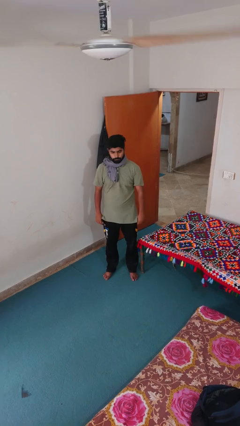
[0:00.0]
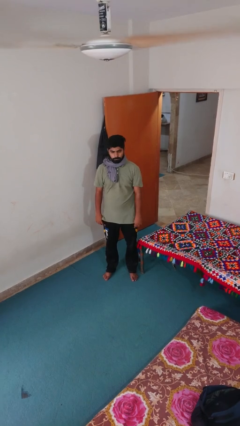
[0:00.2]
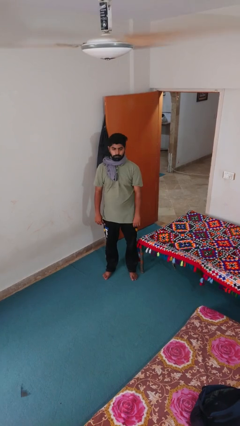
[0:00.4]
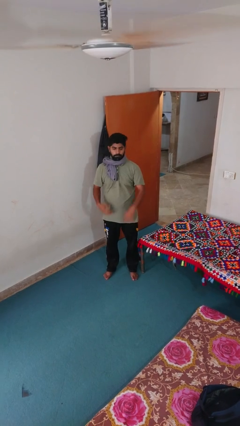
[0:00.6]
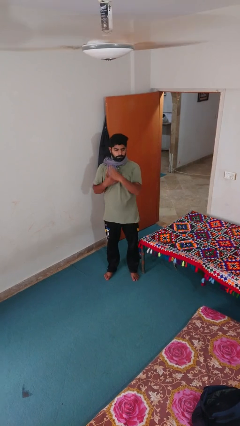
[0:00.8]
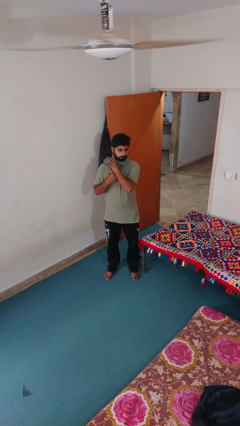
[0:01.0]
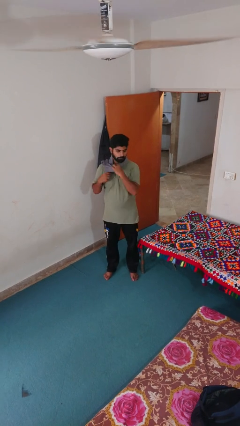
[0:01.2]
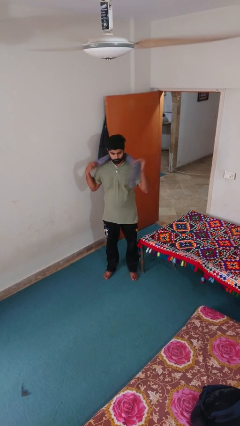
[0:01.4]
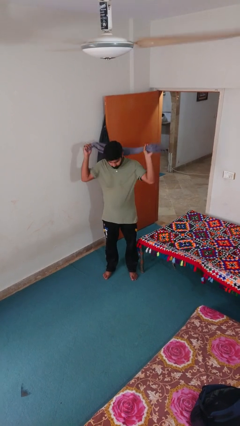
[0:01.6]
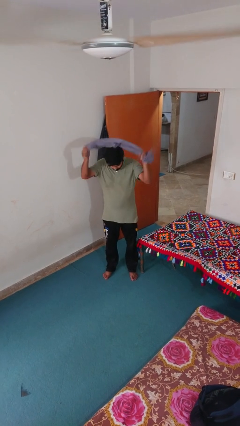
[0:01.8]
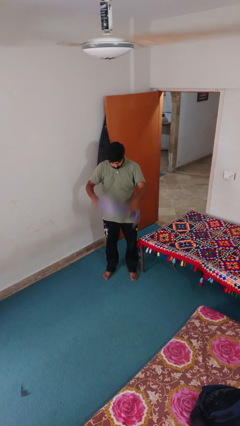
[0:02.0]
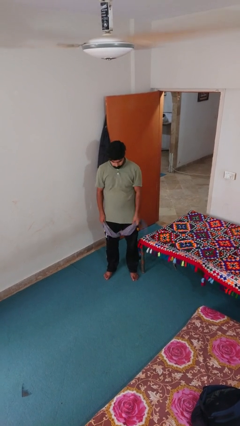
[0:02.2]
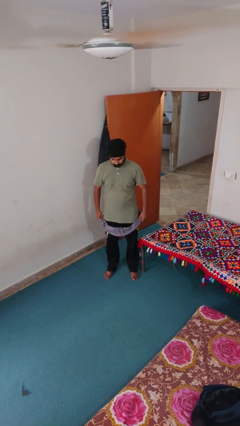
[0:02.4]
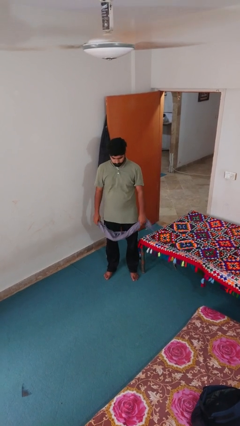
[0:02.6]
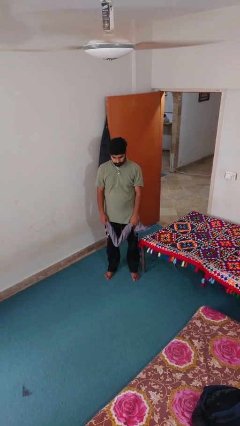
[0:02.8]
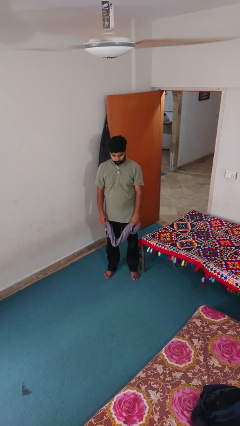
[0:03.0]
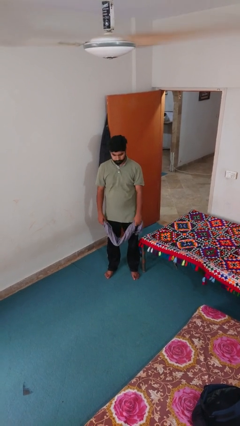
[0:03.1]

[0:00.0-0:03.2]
person takes off scarf

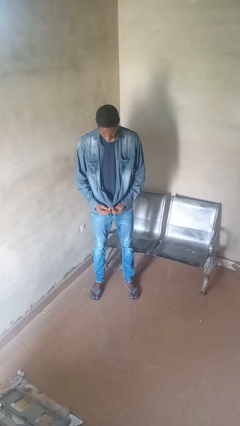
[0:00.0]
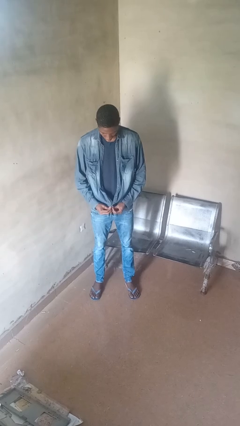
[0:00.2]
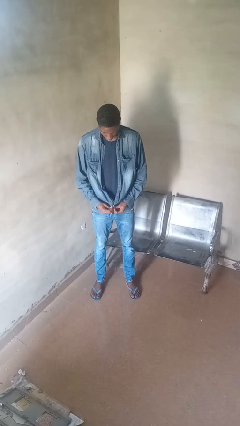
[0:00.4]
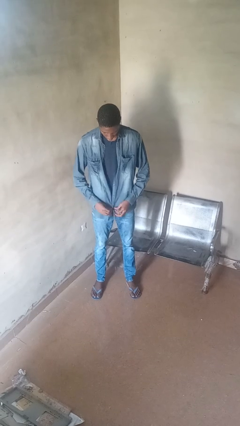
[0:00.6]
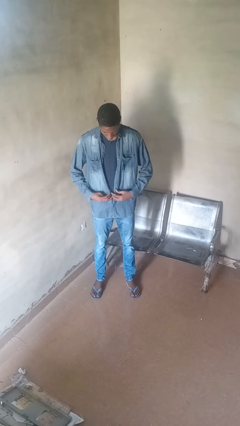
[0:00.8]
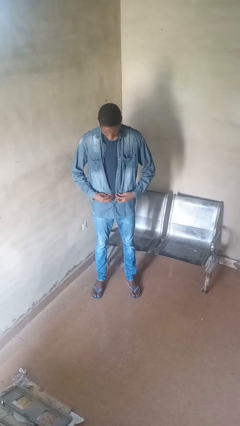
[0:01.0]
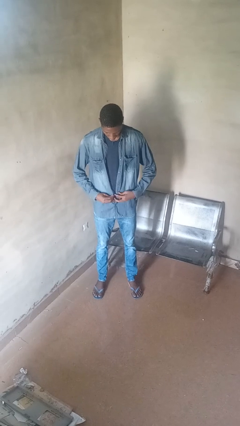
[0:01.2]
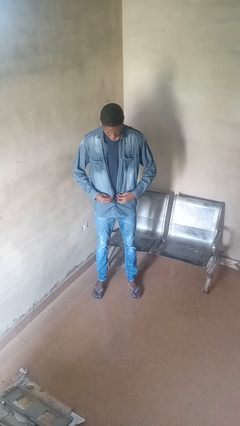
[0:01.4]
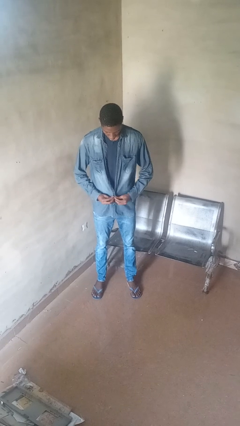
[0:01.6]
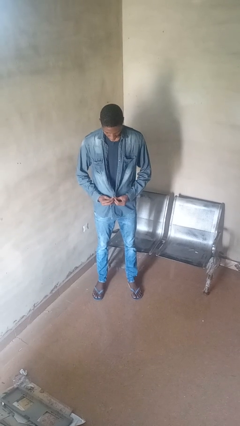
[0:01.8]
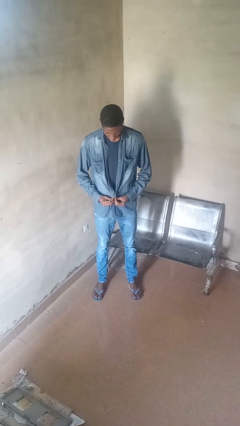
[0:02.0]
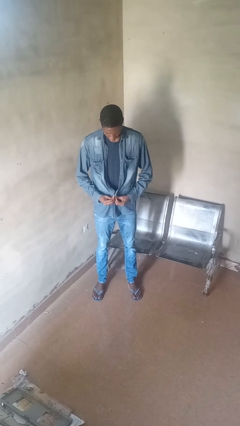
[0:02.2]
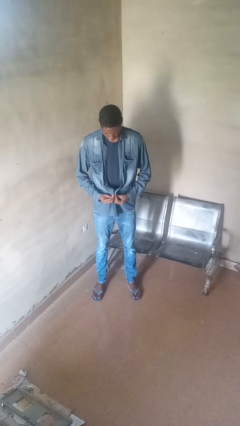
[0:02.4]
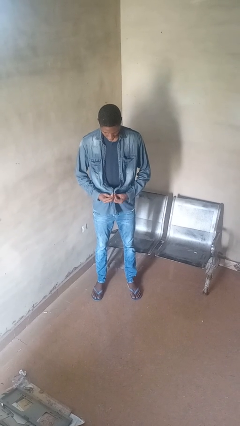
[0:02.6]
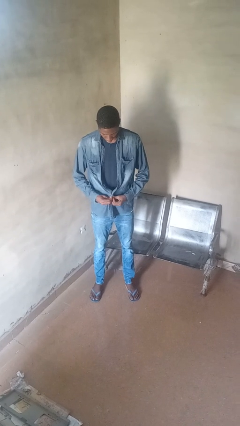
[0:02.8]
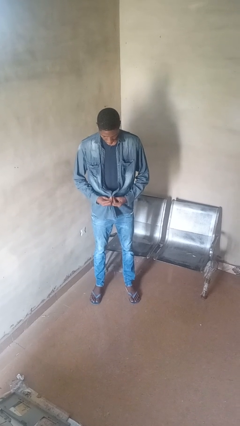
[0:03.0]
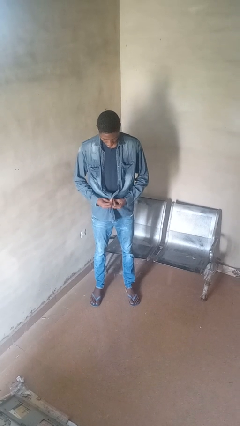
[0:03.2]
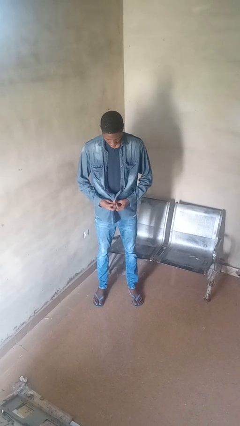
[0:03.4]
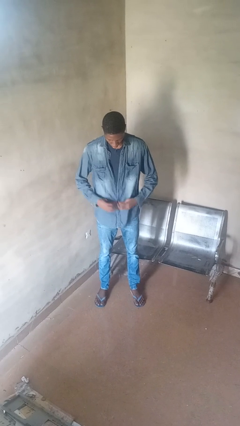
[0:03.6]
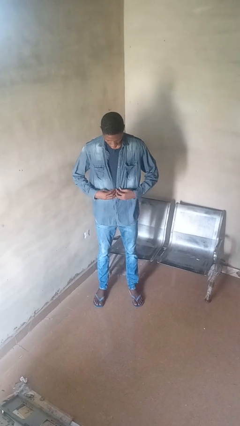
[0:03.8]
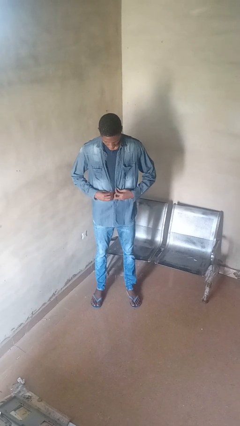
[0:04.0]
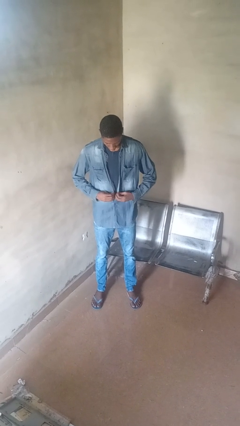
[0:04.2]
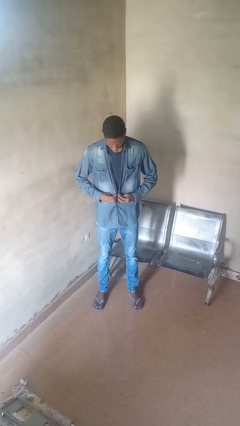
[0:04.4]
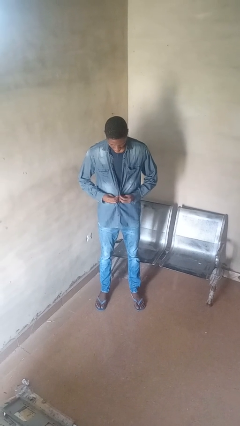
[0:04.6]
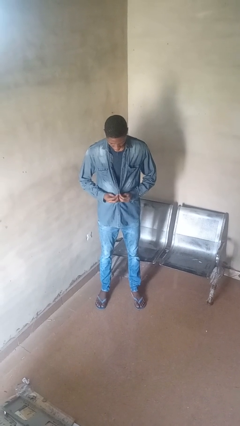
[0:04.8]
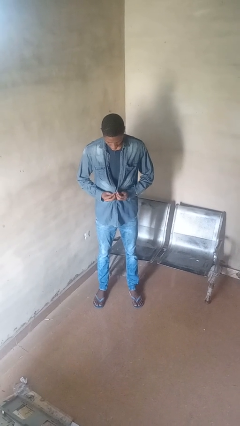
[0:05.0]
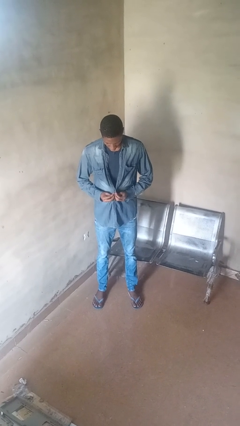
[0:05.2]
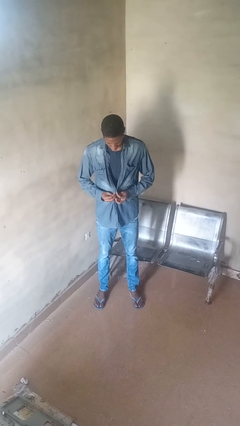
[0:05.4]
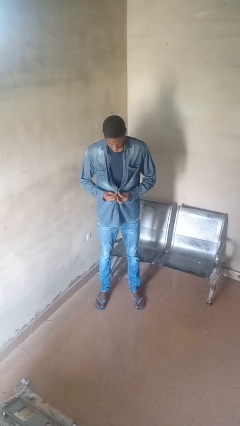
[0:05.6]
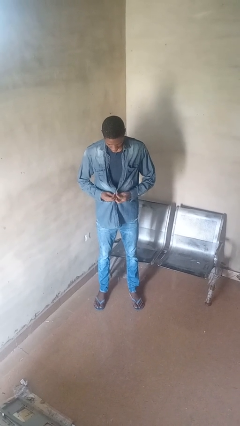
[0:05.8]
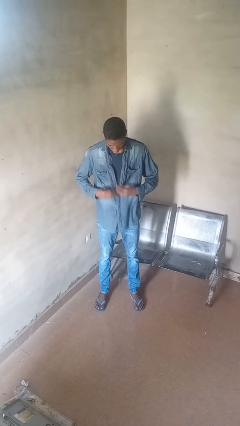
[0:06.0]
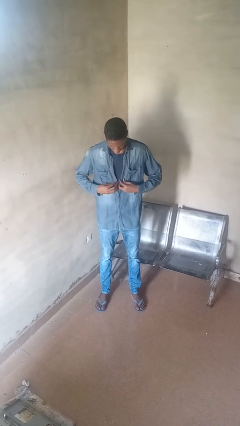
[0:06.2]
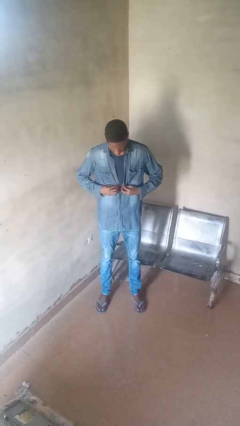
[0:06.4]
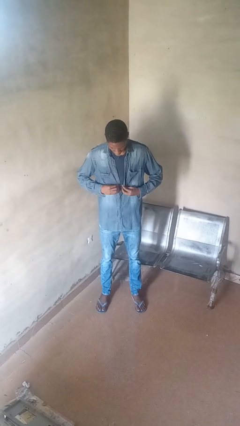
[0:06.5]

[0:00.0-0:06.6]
person buttons shirt

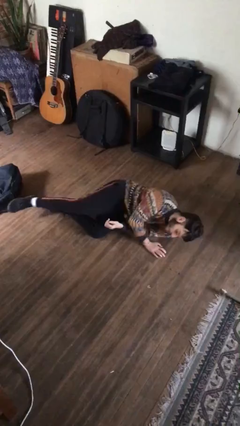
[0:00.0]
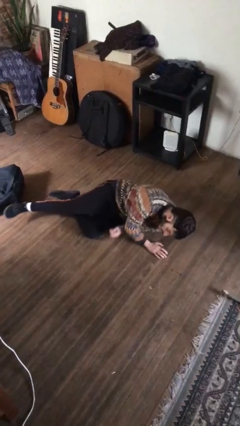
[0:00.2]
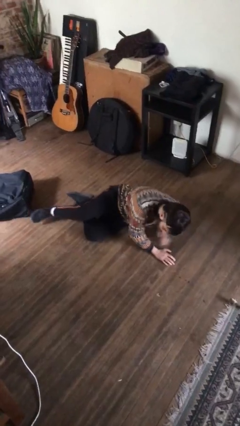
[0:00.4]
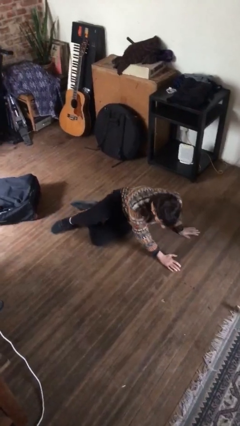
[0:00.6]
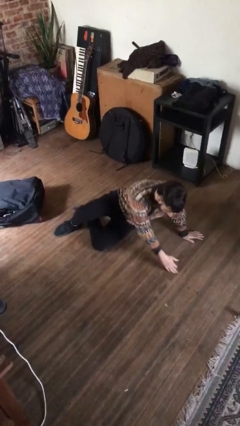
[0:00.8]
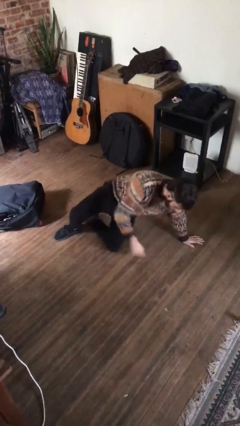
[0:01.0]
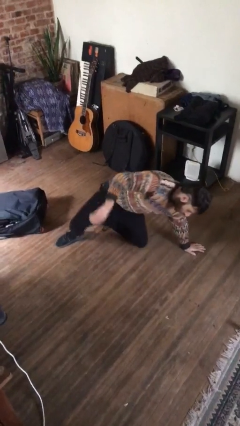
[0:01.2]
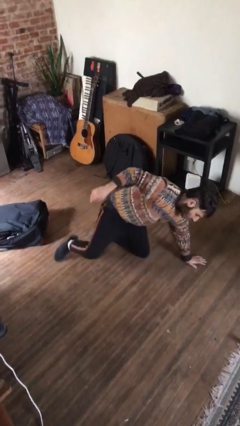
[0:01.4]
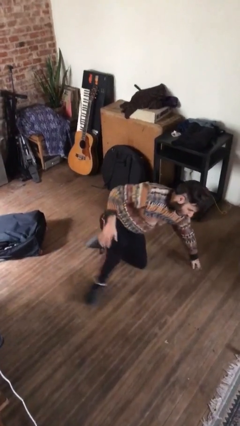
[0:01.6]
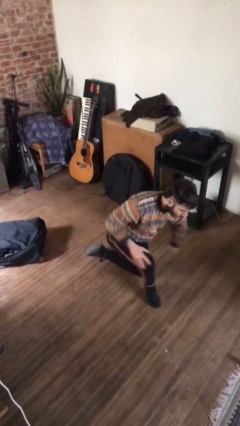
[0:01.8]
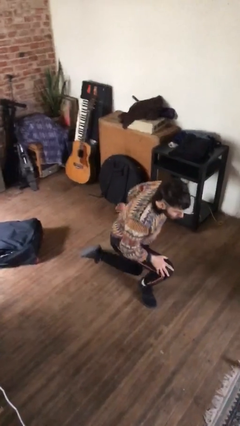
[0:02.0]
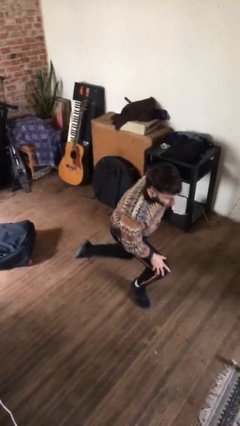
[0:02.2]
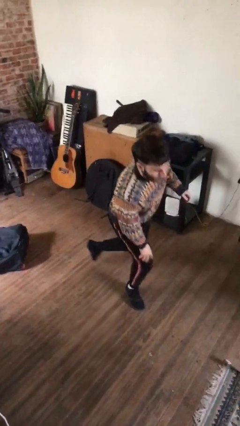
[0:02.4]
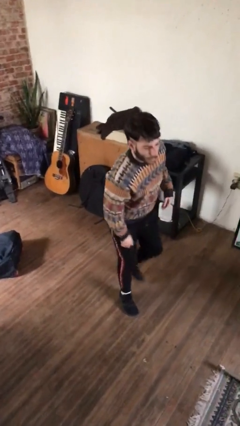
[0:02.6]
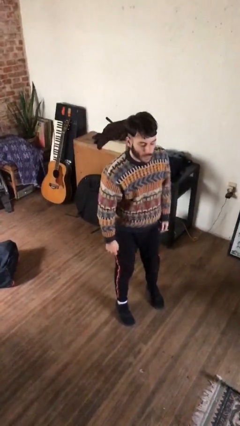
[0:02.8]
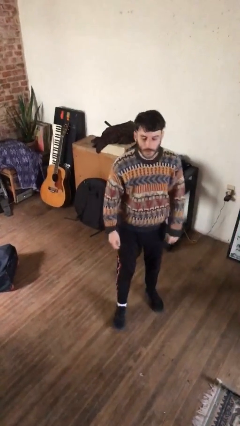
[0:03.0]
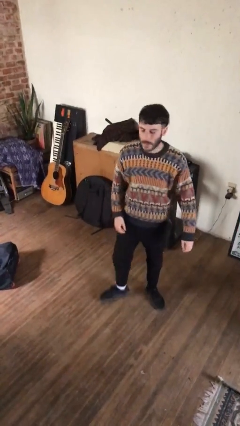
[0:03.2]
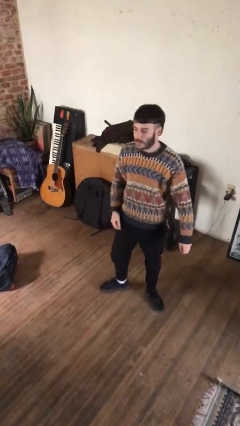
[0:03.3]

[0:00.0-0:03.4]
person stands up from floor

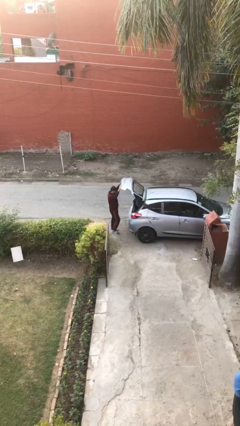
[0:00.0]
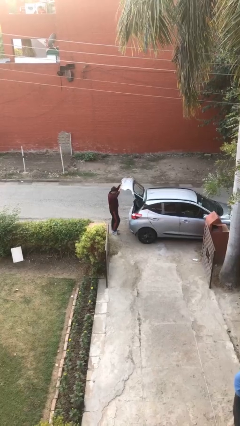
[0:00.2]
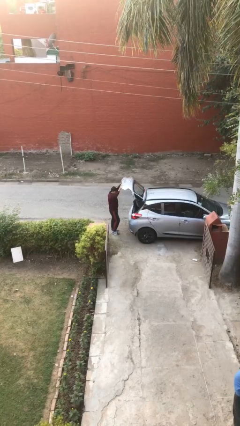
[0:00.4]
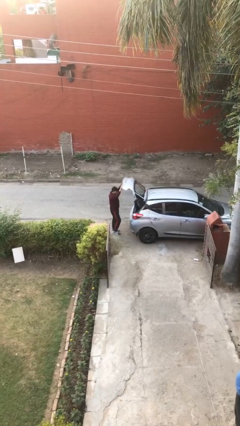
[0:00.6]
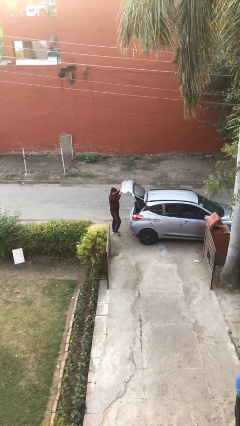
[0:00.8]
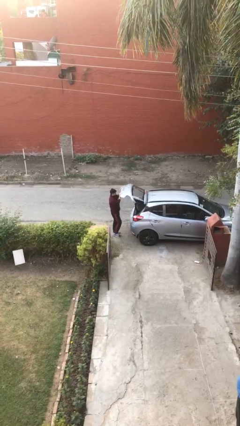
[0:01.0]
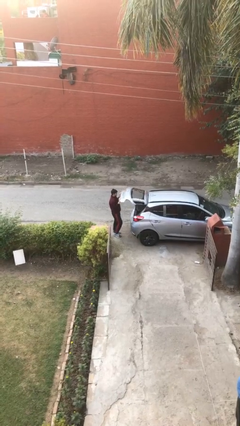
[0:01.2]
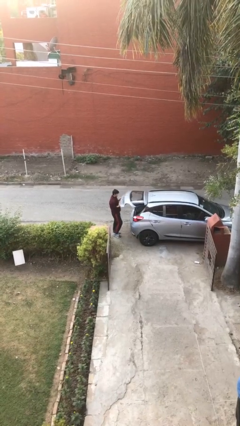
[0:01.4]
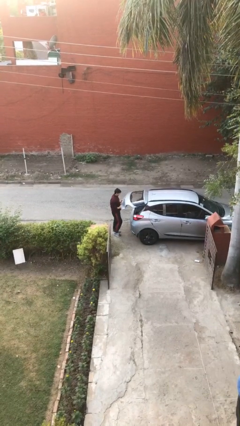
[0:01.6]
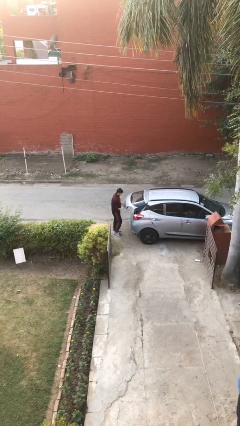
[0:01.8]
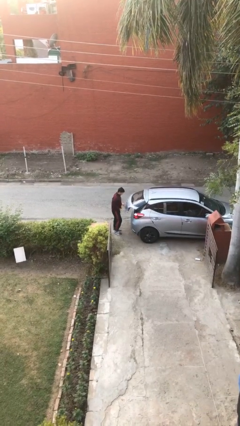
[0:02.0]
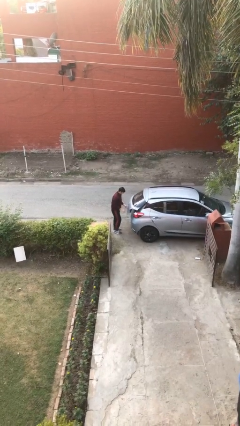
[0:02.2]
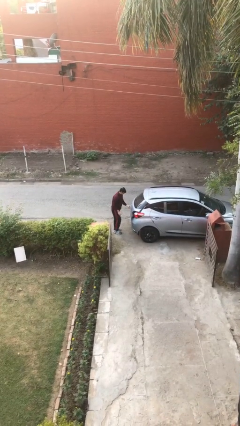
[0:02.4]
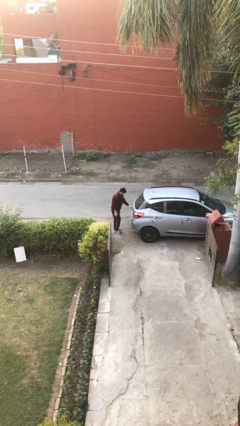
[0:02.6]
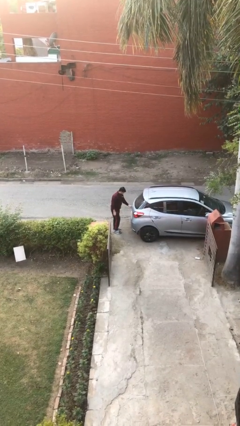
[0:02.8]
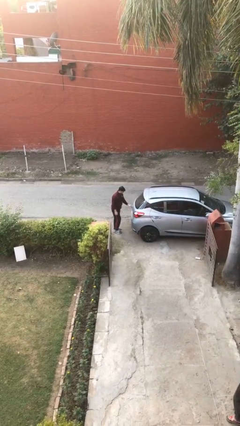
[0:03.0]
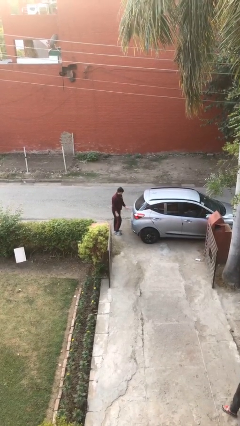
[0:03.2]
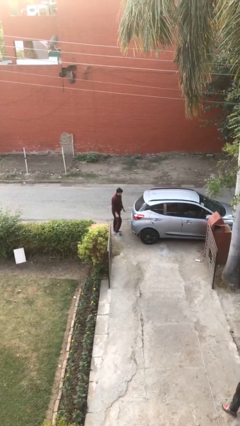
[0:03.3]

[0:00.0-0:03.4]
person closes car trunk

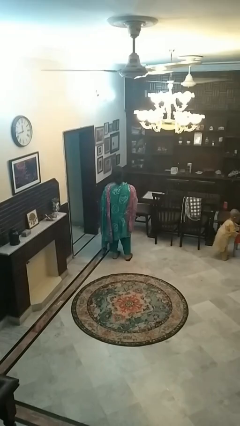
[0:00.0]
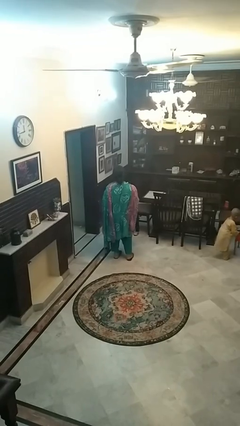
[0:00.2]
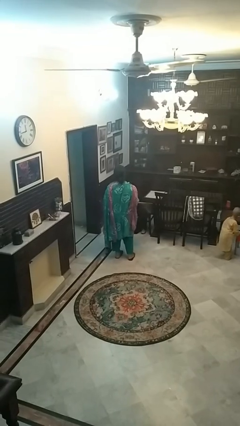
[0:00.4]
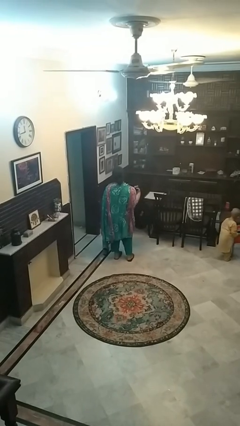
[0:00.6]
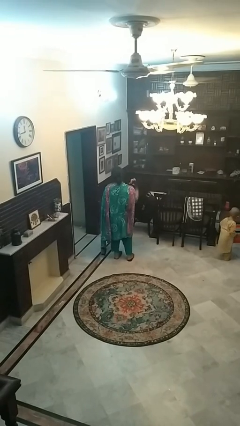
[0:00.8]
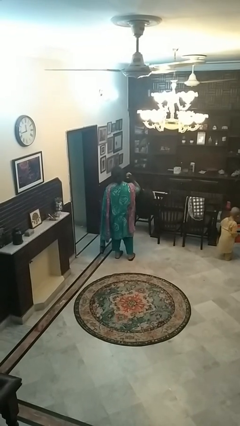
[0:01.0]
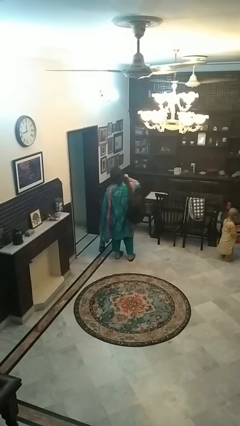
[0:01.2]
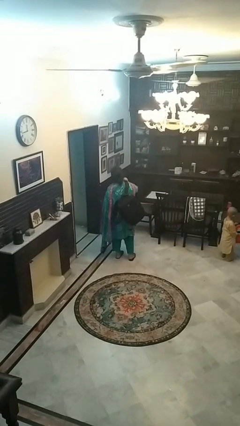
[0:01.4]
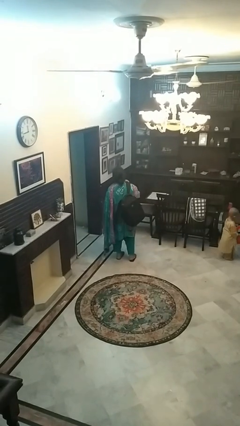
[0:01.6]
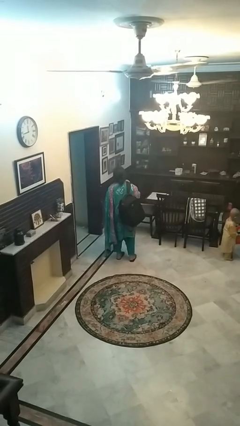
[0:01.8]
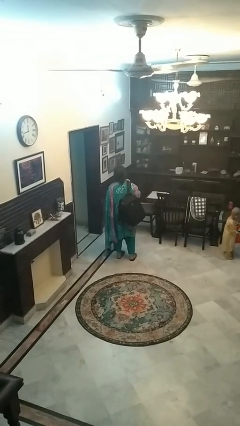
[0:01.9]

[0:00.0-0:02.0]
person puts on backpack
